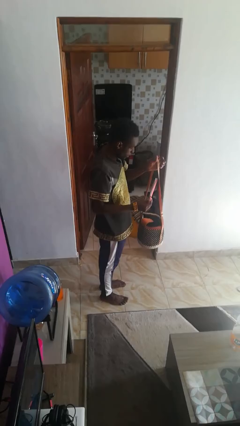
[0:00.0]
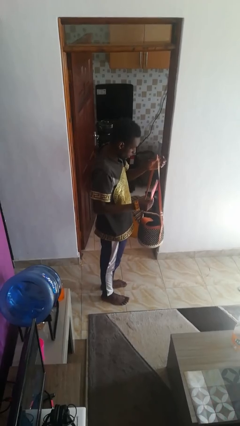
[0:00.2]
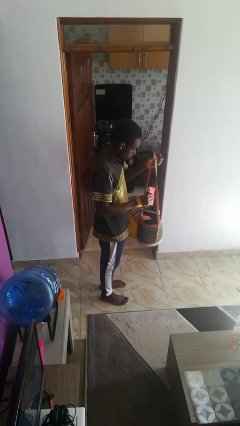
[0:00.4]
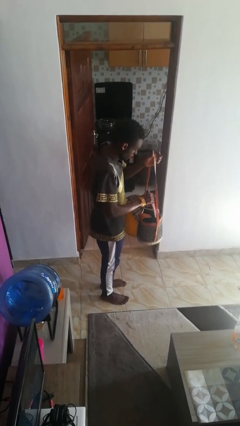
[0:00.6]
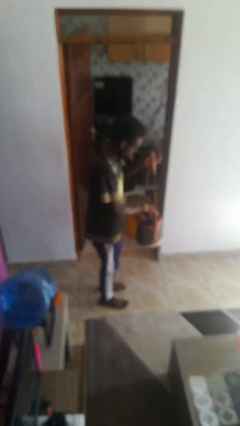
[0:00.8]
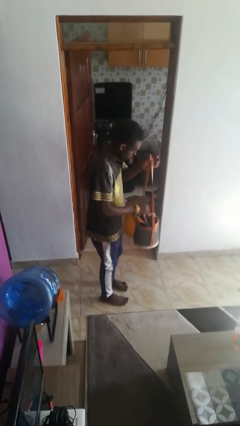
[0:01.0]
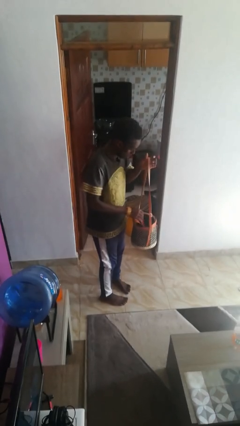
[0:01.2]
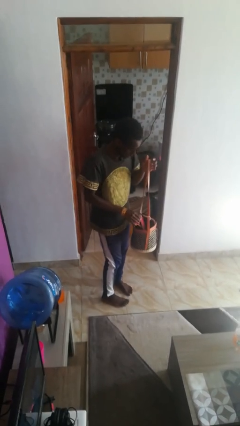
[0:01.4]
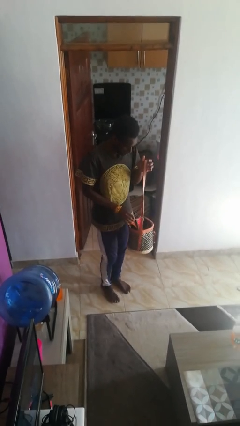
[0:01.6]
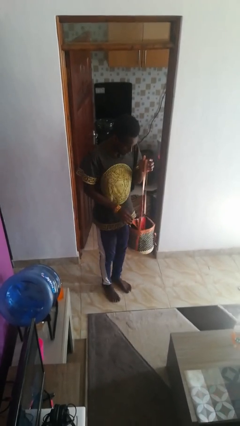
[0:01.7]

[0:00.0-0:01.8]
person puts object into purse

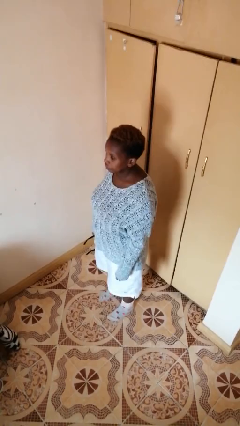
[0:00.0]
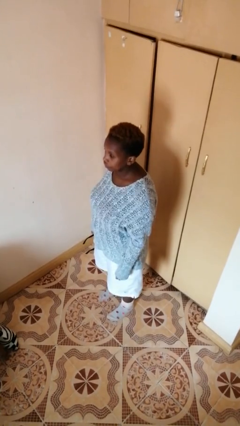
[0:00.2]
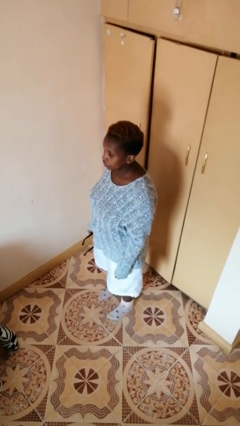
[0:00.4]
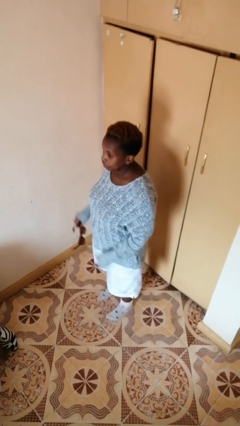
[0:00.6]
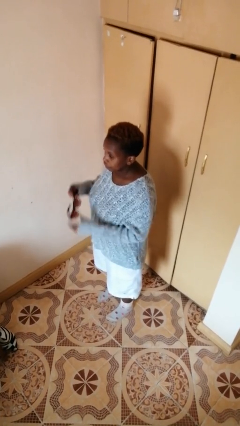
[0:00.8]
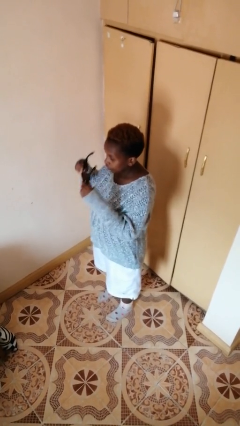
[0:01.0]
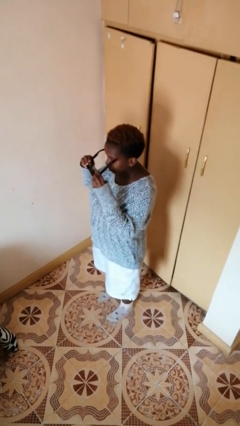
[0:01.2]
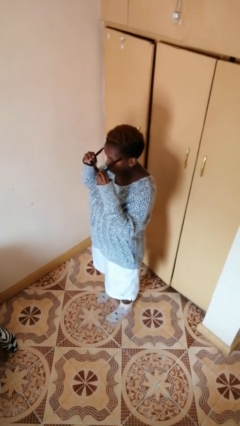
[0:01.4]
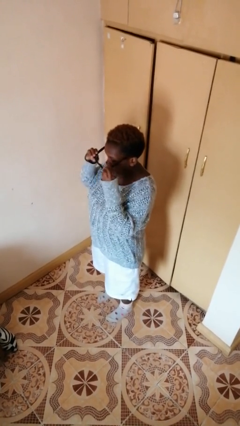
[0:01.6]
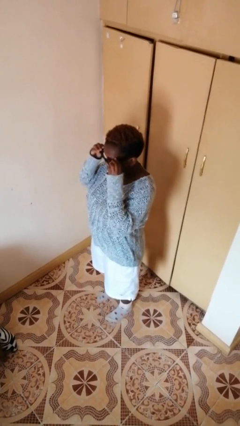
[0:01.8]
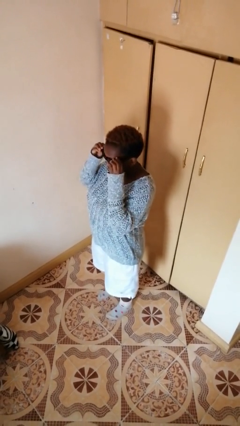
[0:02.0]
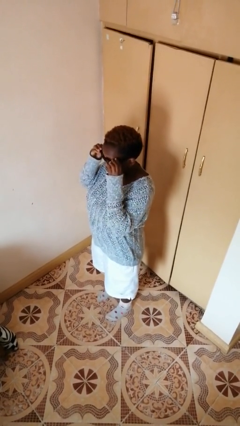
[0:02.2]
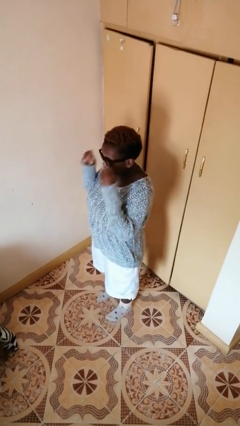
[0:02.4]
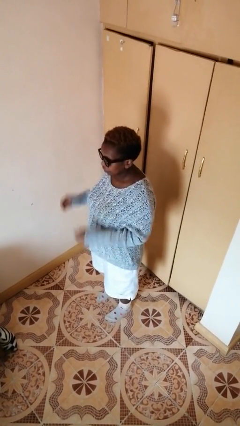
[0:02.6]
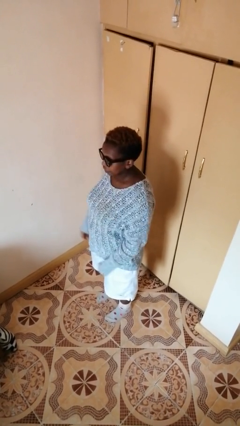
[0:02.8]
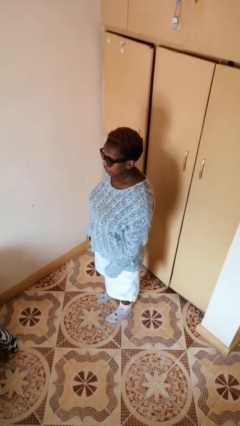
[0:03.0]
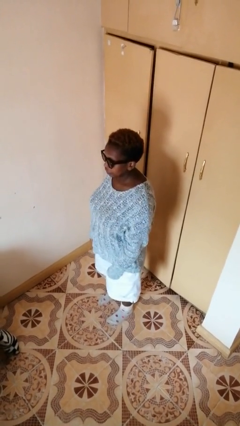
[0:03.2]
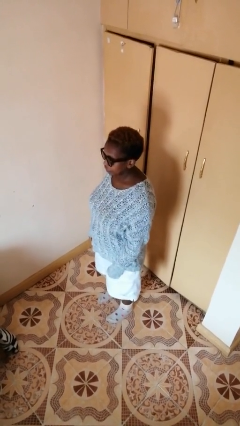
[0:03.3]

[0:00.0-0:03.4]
person puts on sunglasses

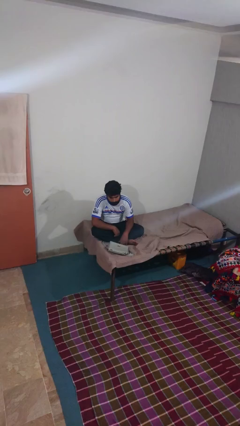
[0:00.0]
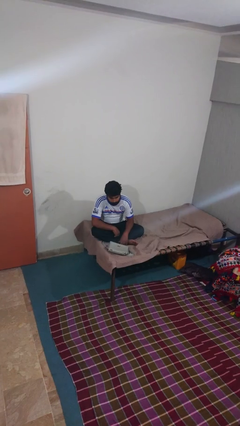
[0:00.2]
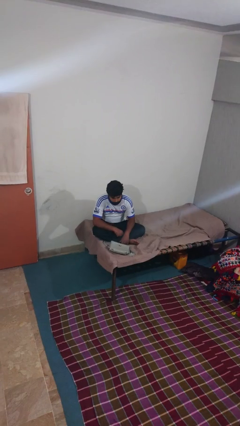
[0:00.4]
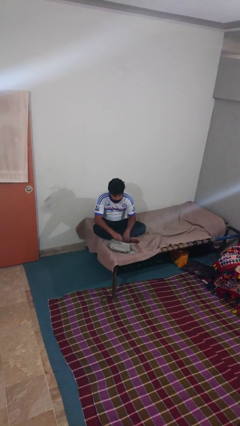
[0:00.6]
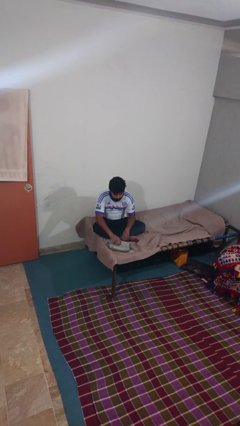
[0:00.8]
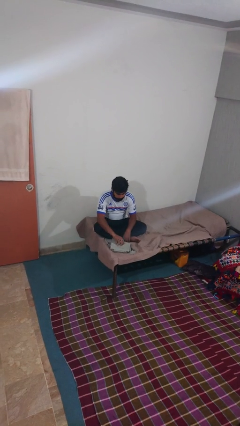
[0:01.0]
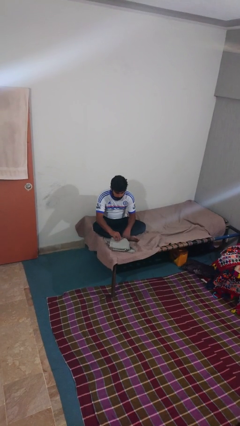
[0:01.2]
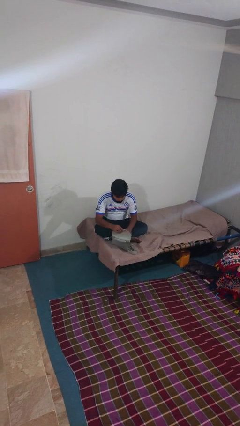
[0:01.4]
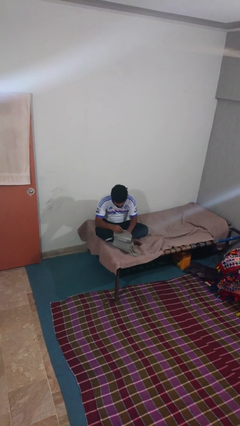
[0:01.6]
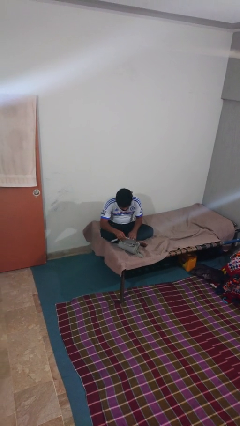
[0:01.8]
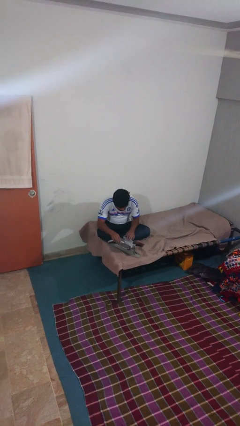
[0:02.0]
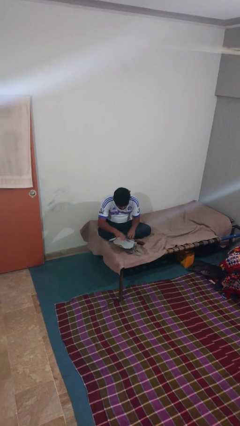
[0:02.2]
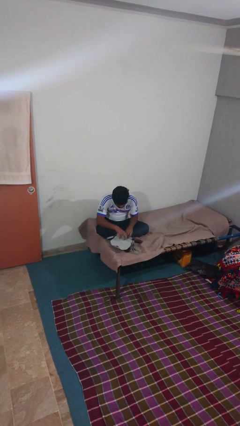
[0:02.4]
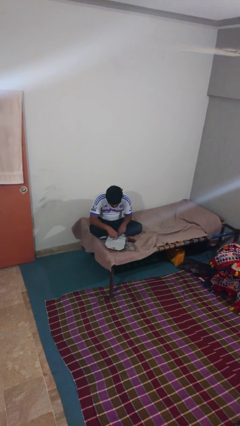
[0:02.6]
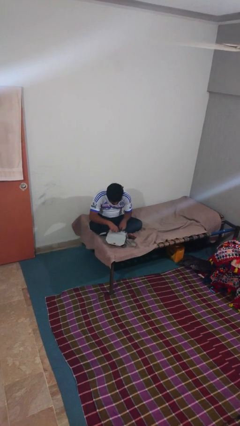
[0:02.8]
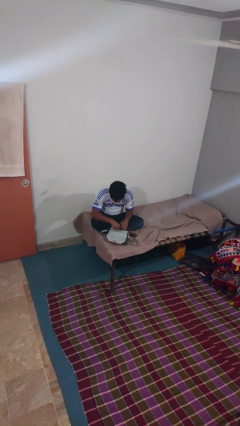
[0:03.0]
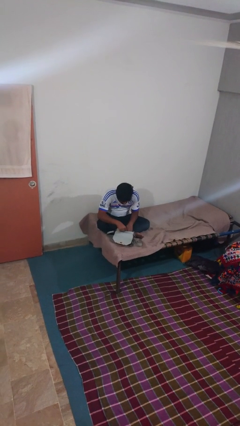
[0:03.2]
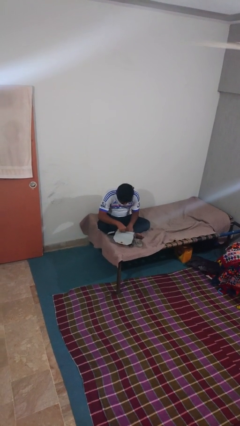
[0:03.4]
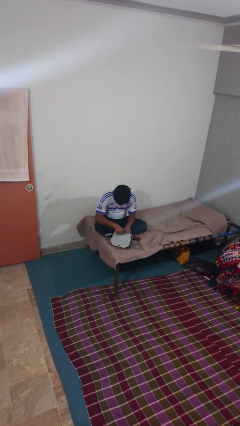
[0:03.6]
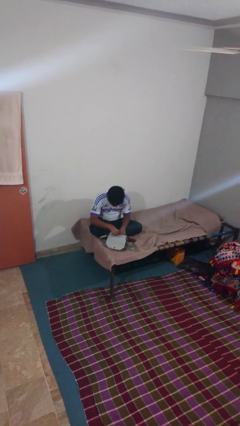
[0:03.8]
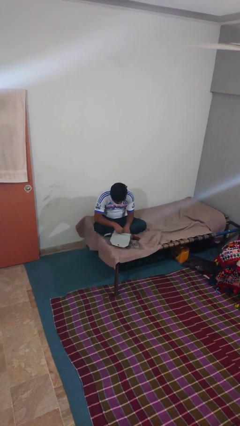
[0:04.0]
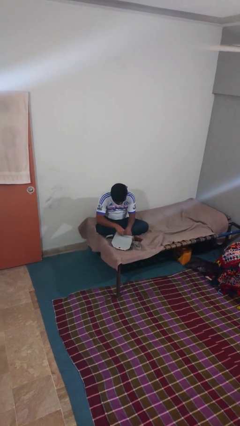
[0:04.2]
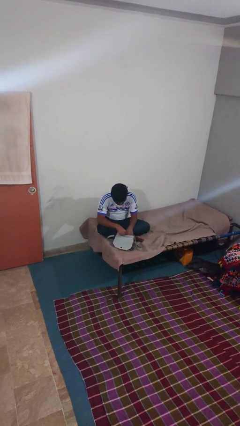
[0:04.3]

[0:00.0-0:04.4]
person searches in purse

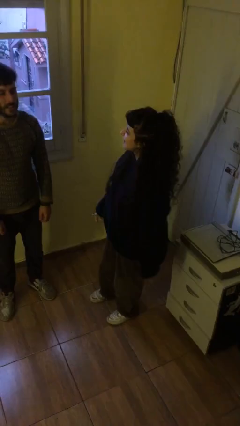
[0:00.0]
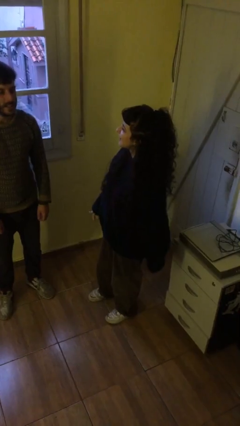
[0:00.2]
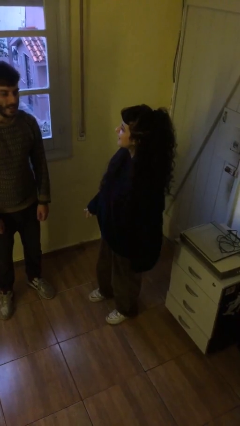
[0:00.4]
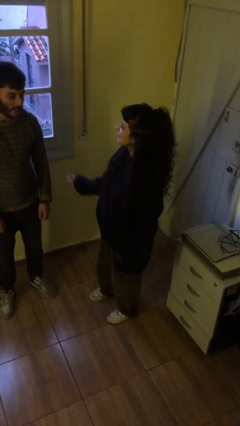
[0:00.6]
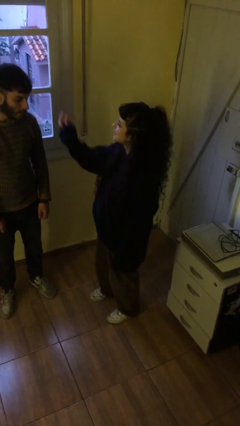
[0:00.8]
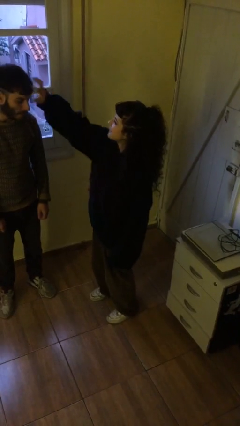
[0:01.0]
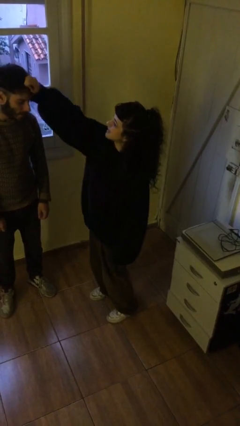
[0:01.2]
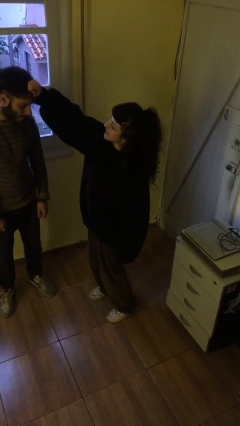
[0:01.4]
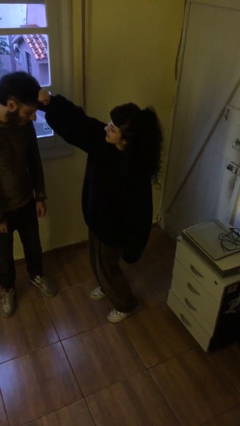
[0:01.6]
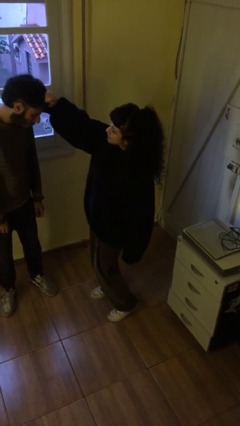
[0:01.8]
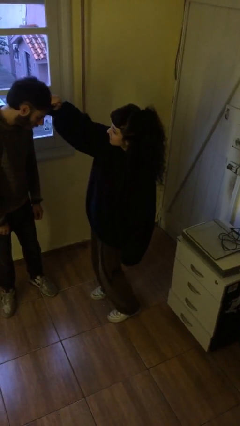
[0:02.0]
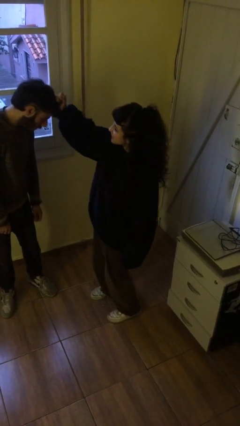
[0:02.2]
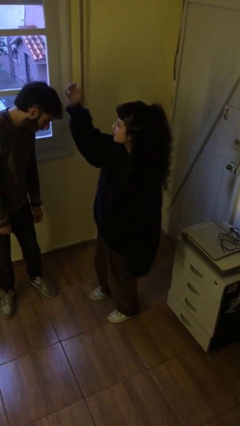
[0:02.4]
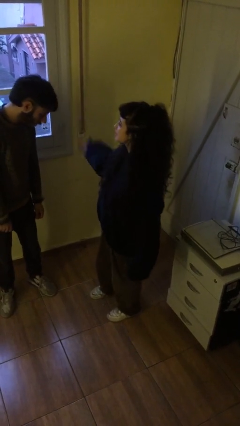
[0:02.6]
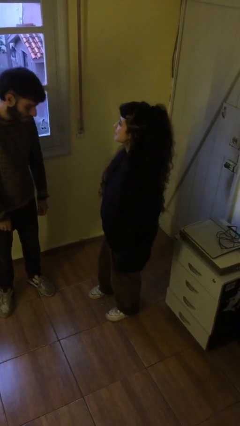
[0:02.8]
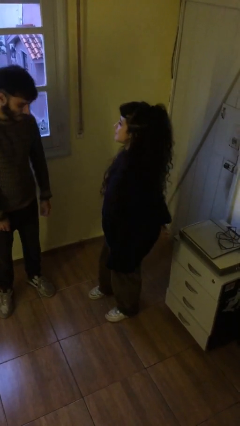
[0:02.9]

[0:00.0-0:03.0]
person grabs person by hair

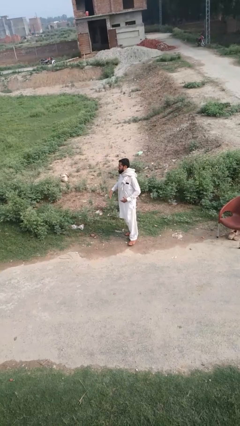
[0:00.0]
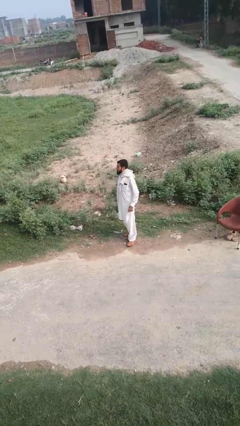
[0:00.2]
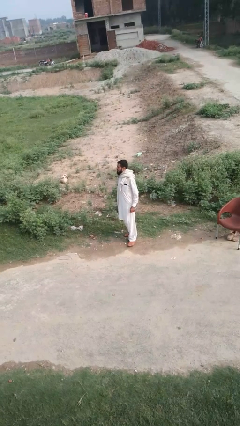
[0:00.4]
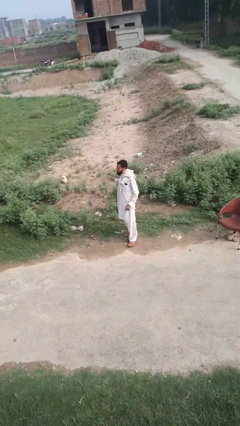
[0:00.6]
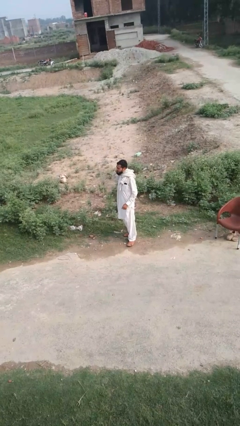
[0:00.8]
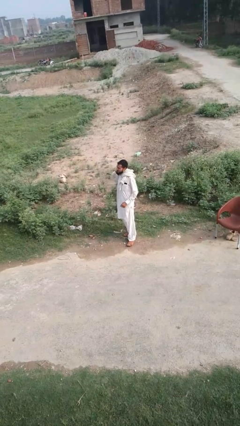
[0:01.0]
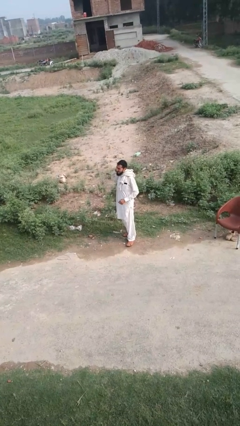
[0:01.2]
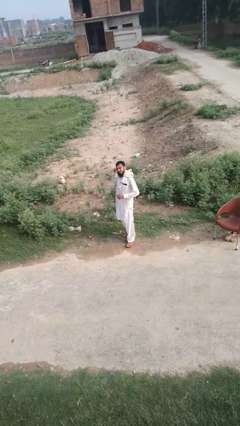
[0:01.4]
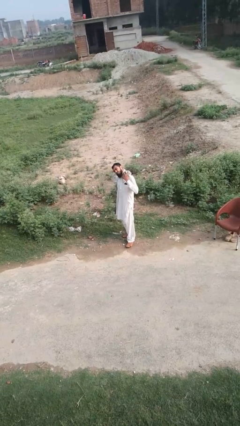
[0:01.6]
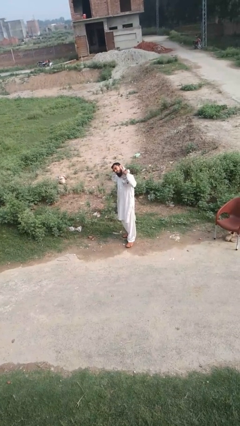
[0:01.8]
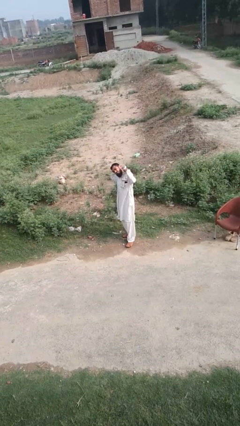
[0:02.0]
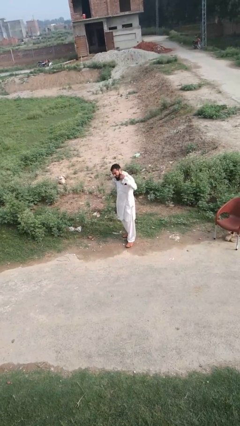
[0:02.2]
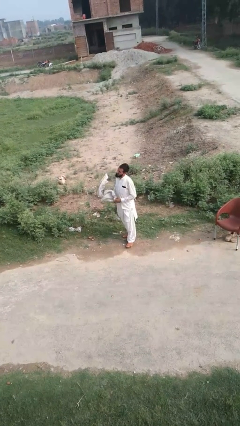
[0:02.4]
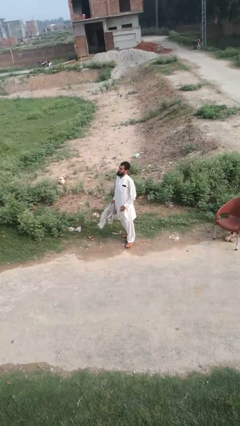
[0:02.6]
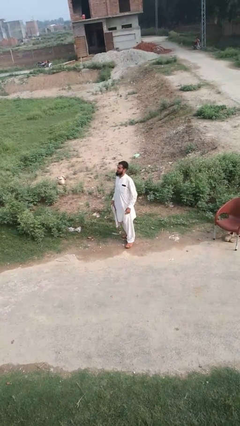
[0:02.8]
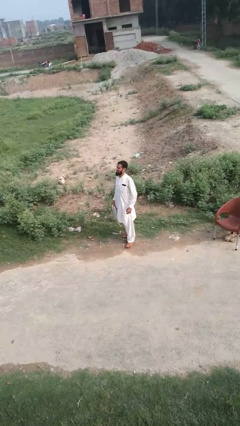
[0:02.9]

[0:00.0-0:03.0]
person takes off scarf

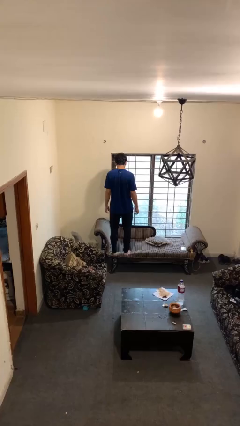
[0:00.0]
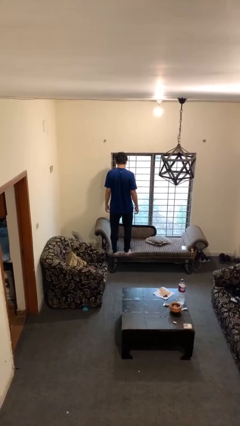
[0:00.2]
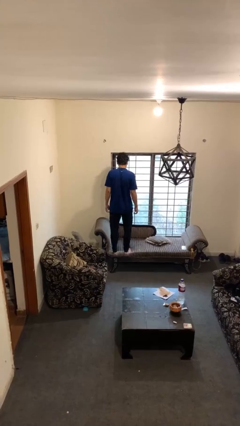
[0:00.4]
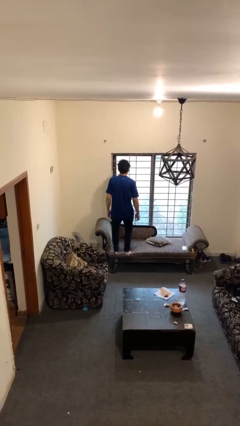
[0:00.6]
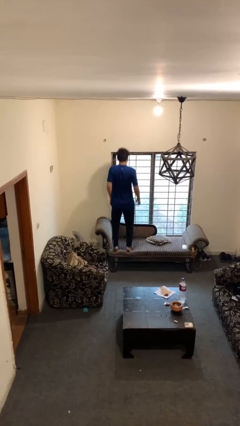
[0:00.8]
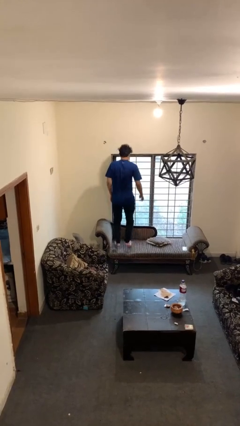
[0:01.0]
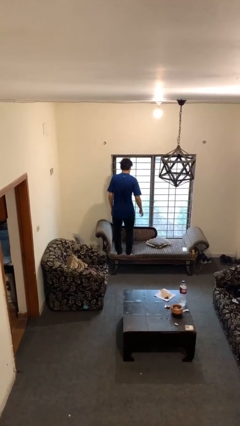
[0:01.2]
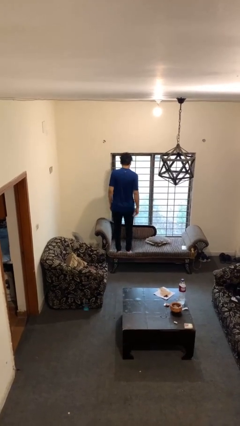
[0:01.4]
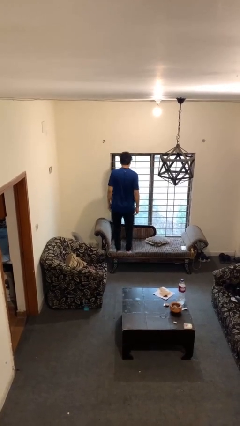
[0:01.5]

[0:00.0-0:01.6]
person jumps on couch

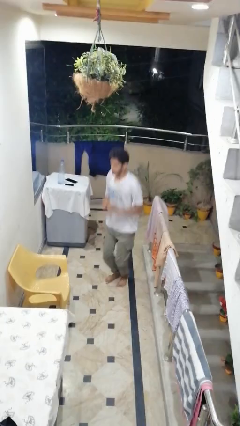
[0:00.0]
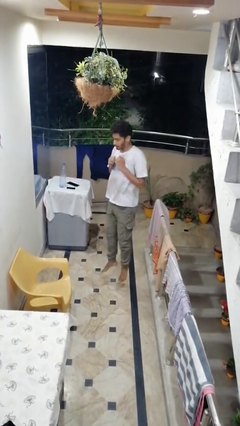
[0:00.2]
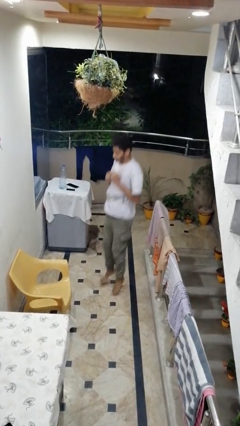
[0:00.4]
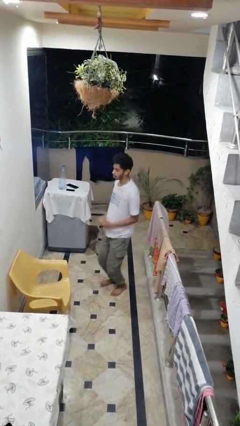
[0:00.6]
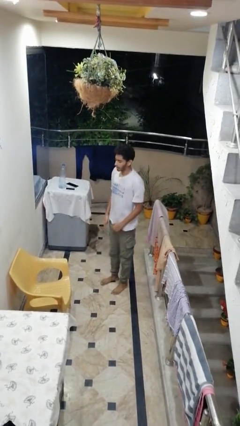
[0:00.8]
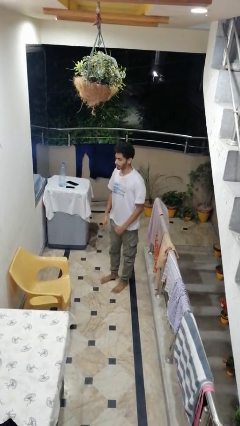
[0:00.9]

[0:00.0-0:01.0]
person jumps
